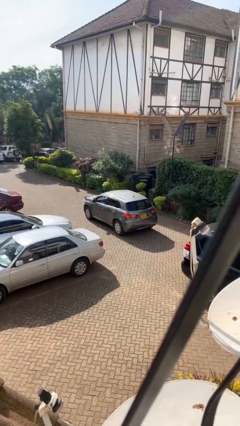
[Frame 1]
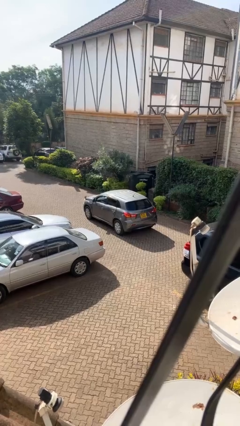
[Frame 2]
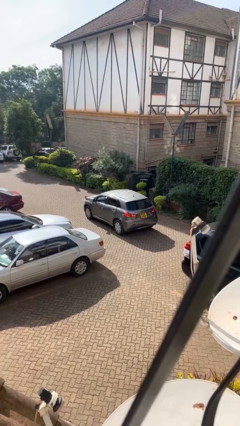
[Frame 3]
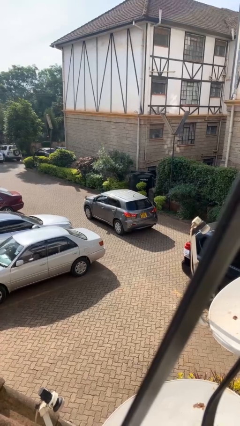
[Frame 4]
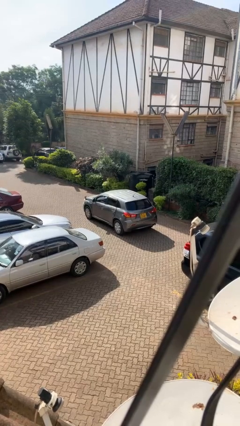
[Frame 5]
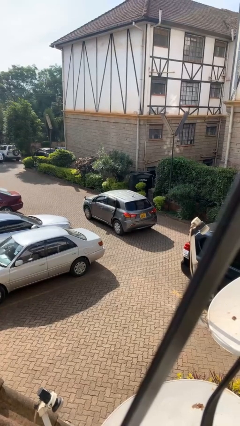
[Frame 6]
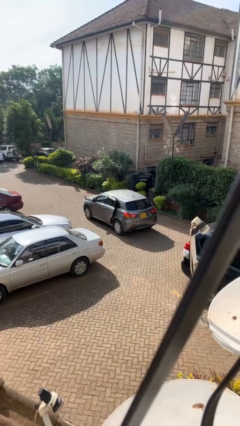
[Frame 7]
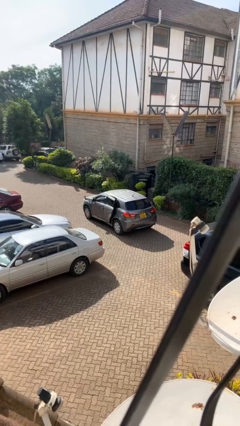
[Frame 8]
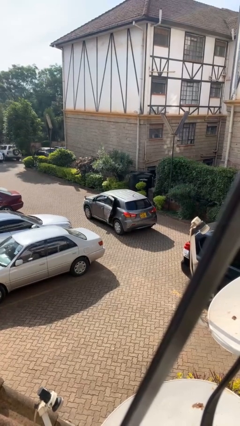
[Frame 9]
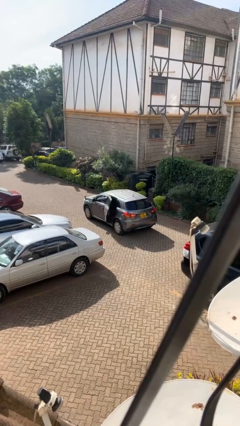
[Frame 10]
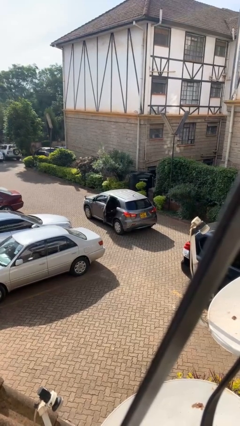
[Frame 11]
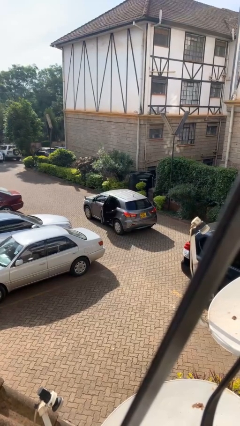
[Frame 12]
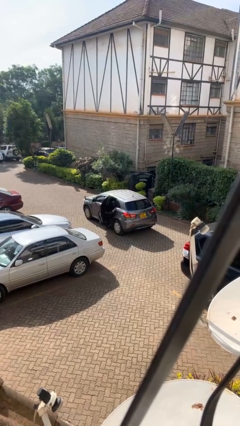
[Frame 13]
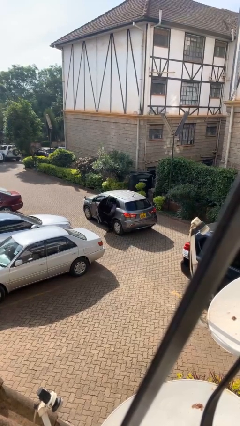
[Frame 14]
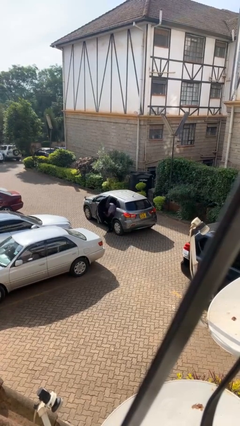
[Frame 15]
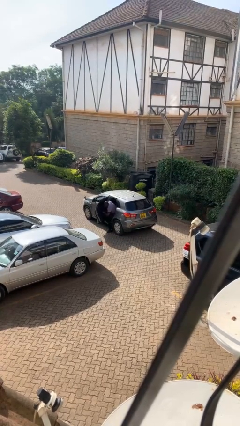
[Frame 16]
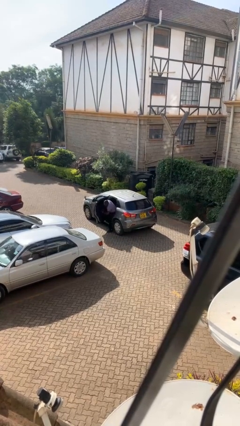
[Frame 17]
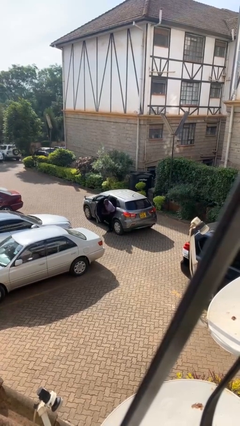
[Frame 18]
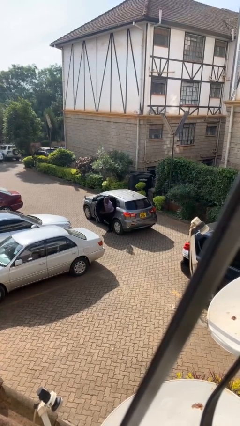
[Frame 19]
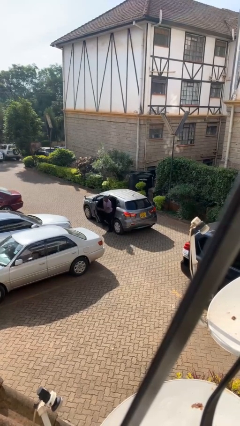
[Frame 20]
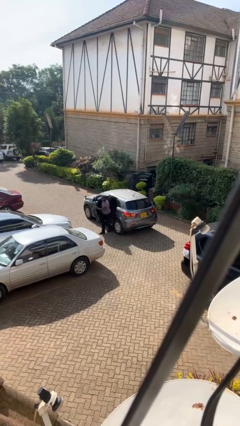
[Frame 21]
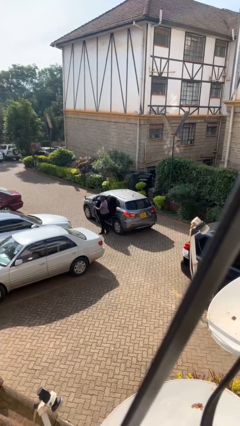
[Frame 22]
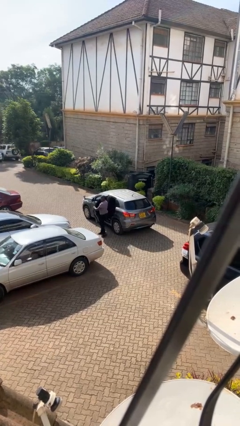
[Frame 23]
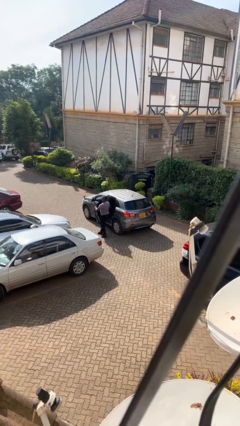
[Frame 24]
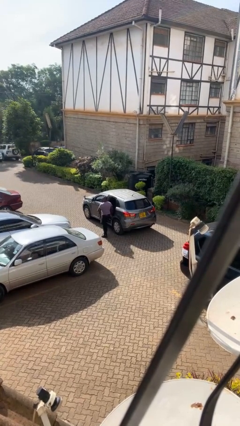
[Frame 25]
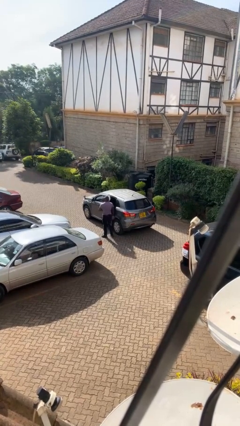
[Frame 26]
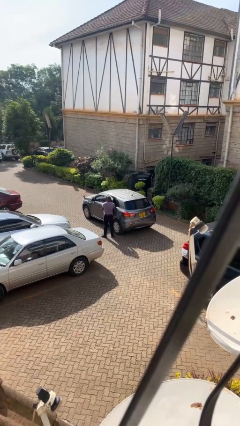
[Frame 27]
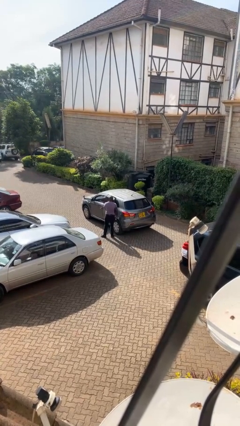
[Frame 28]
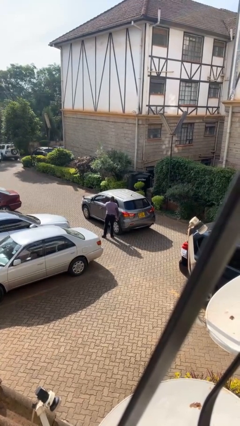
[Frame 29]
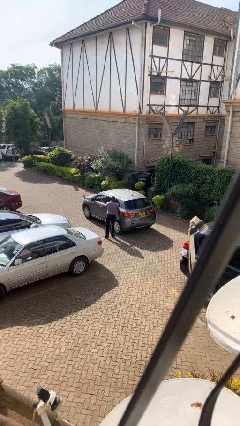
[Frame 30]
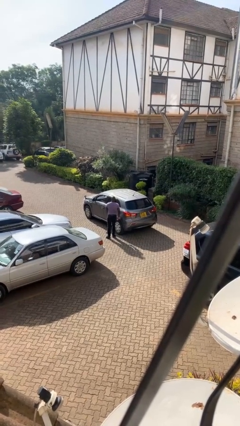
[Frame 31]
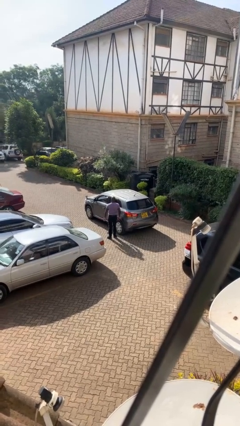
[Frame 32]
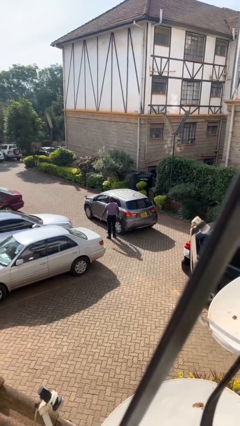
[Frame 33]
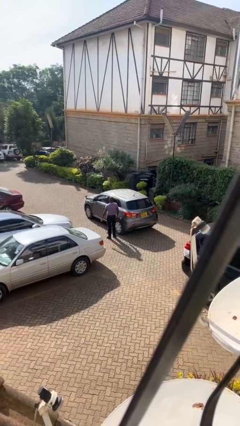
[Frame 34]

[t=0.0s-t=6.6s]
car drops off person

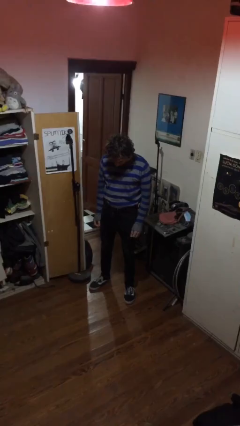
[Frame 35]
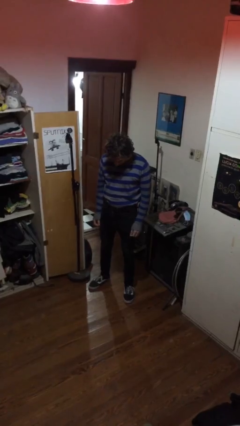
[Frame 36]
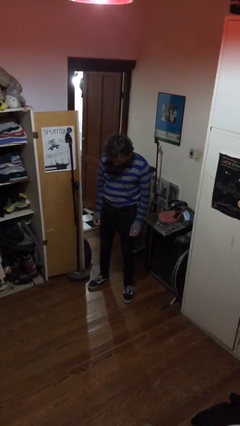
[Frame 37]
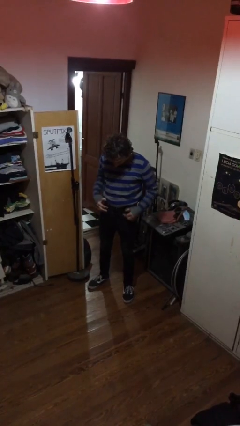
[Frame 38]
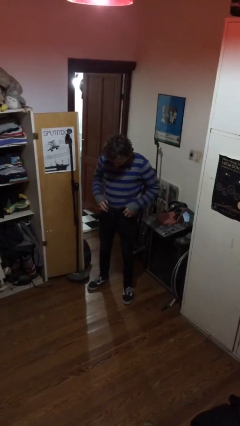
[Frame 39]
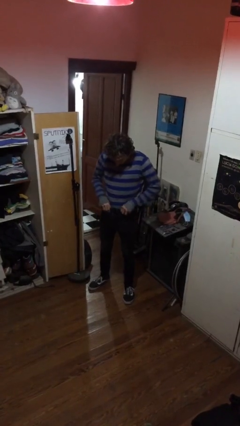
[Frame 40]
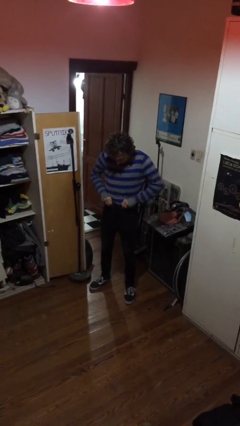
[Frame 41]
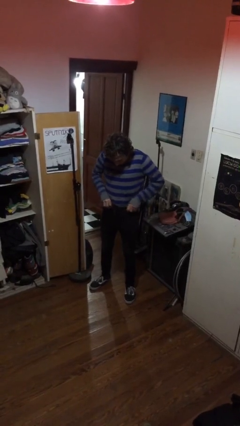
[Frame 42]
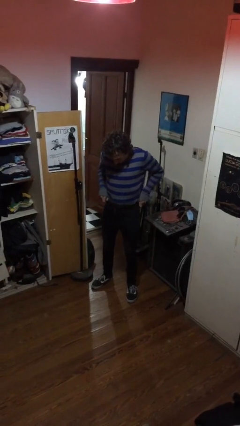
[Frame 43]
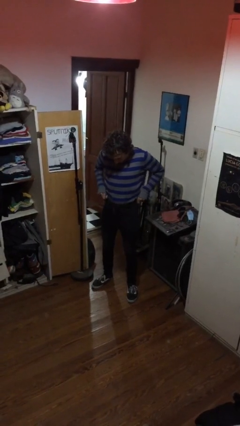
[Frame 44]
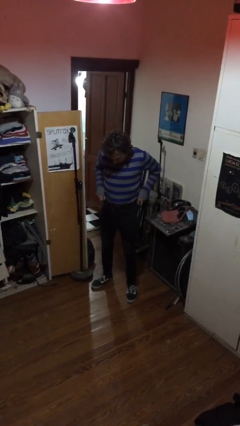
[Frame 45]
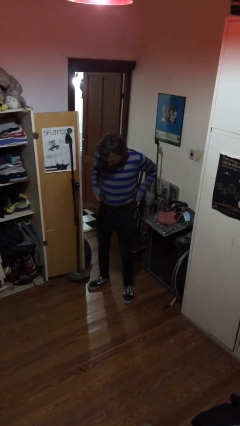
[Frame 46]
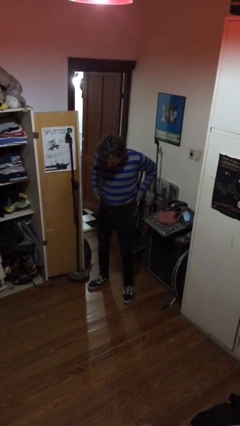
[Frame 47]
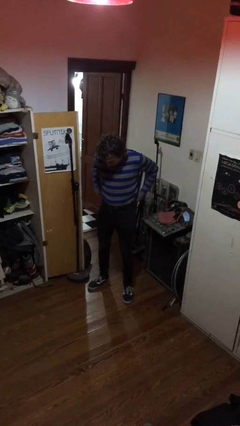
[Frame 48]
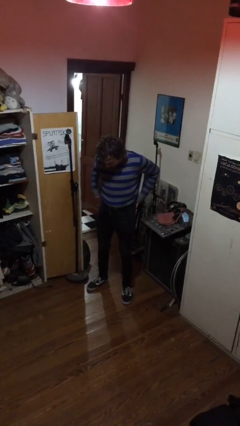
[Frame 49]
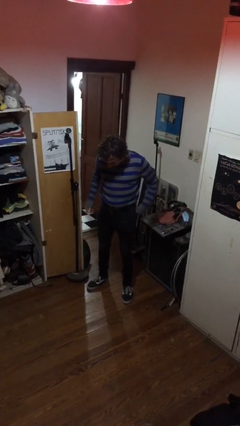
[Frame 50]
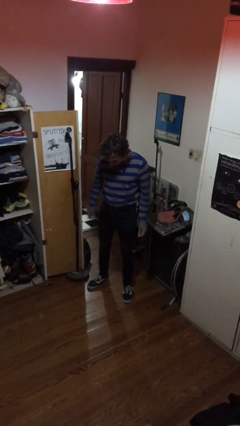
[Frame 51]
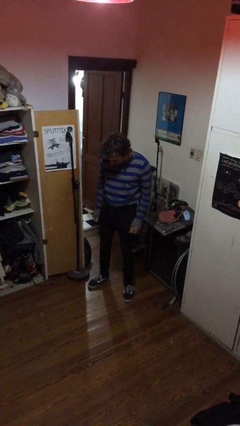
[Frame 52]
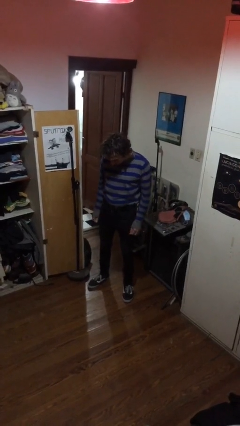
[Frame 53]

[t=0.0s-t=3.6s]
person hikes up pants

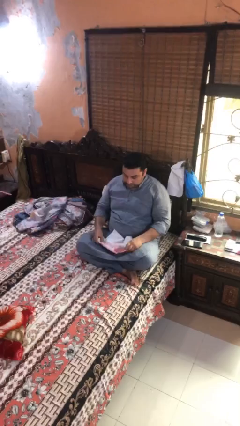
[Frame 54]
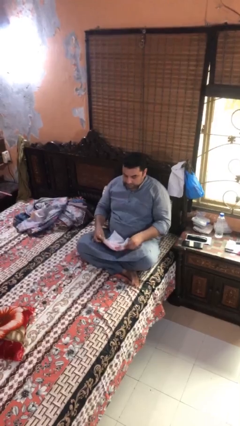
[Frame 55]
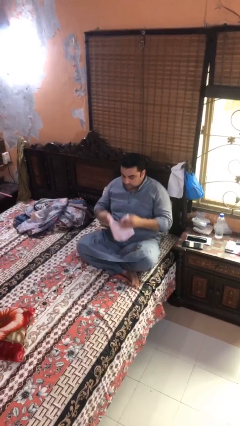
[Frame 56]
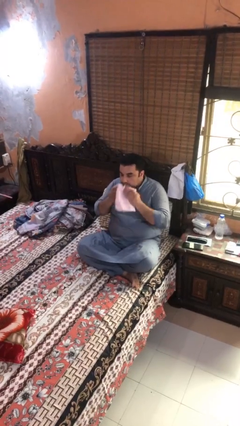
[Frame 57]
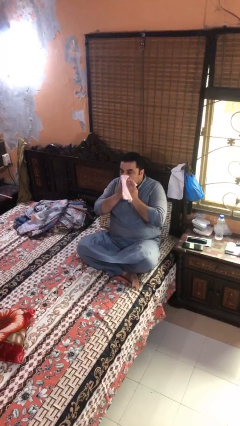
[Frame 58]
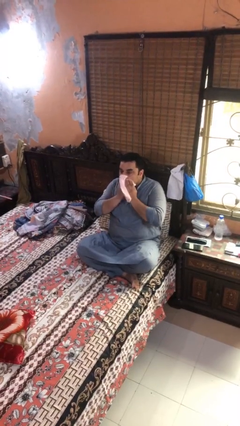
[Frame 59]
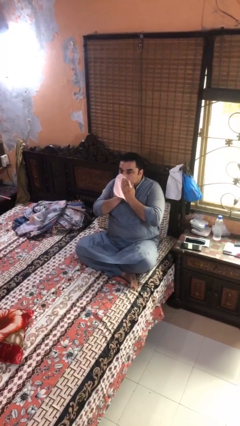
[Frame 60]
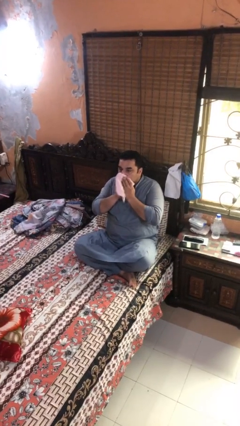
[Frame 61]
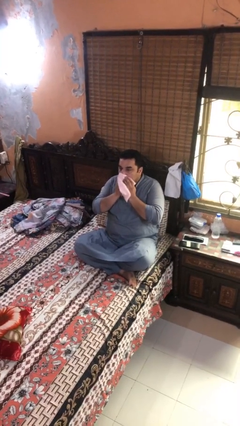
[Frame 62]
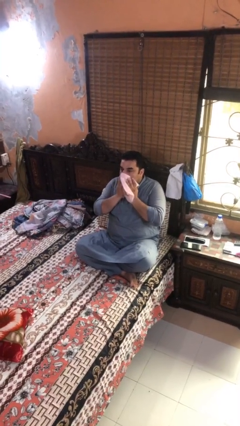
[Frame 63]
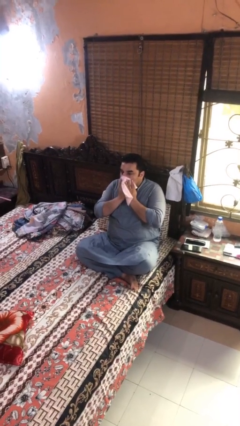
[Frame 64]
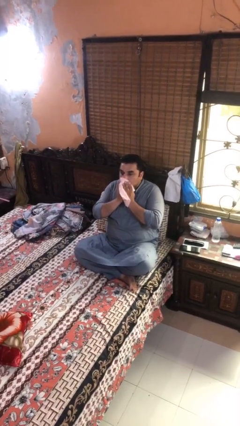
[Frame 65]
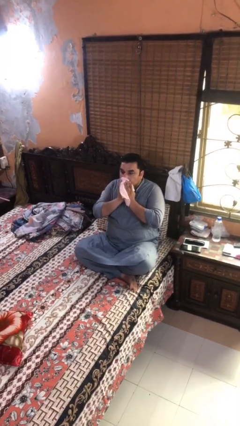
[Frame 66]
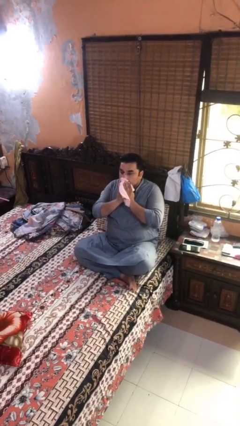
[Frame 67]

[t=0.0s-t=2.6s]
person wipes mouth with napkin

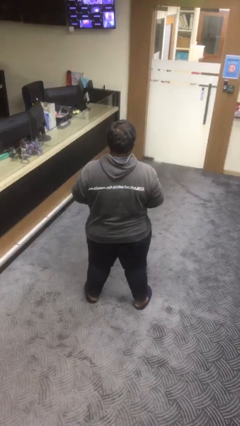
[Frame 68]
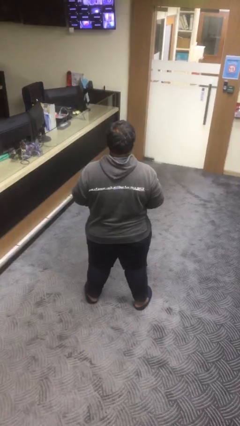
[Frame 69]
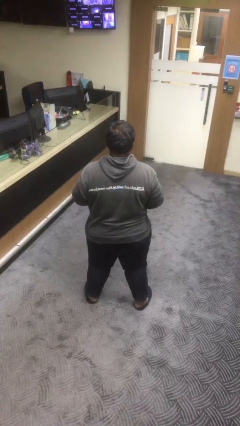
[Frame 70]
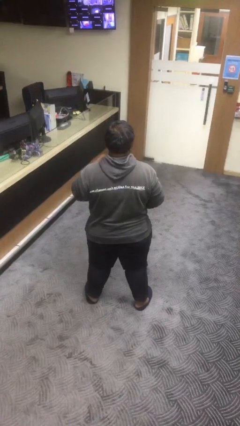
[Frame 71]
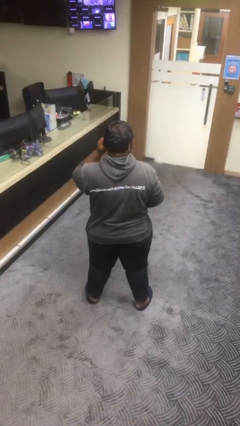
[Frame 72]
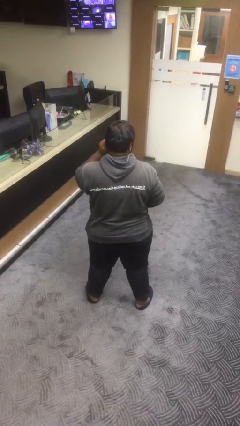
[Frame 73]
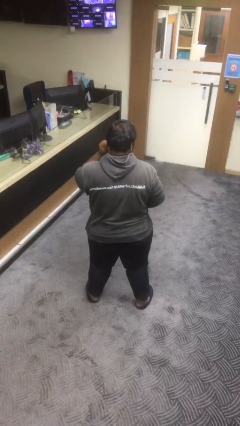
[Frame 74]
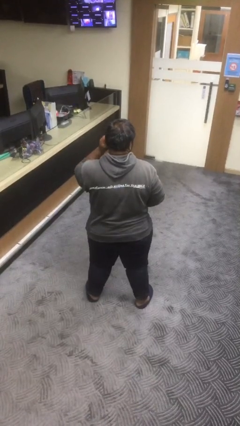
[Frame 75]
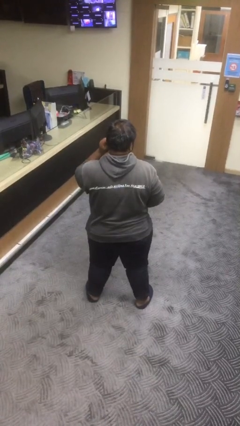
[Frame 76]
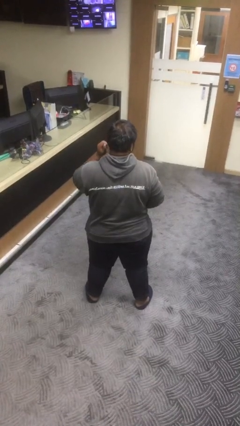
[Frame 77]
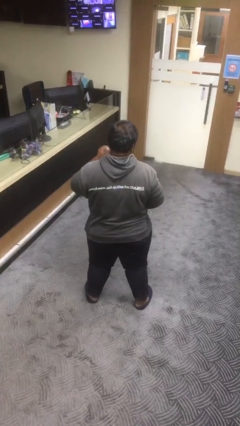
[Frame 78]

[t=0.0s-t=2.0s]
person touches earlobe

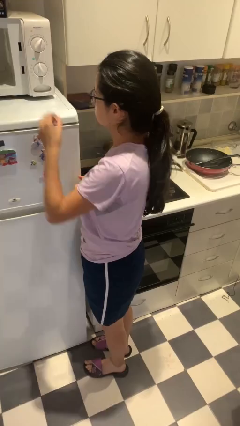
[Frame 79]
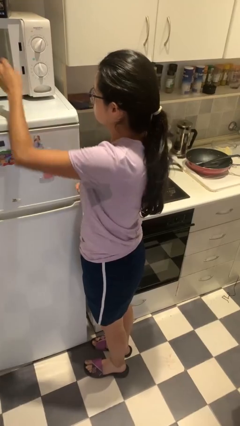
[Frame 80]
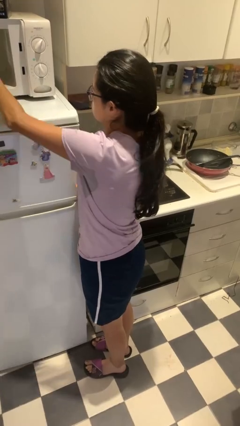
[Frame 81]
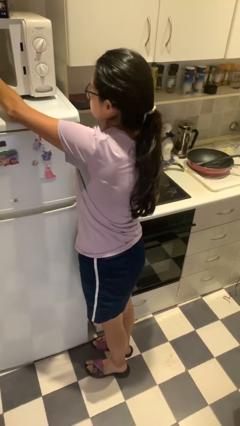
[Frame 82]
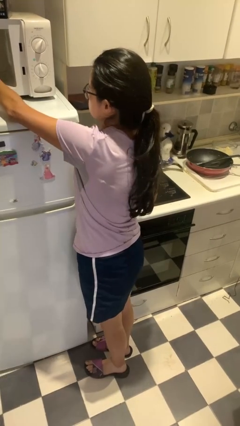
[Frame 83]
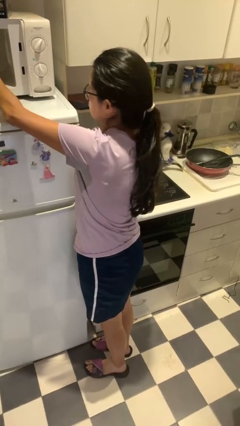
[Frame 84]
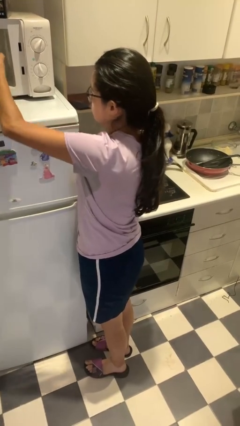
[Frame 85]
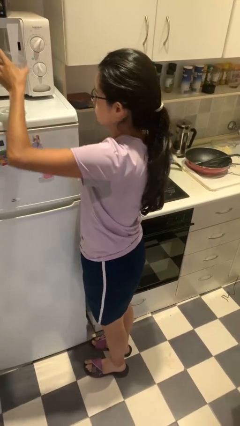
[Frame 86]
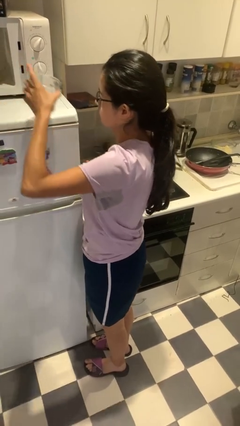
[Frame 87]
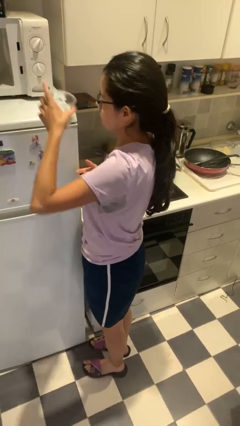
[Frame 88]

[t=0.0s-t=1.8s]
person takes object from microwave

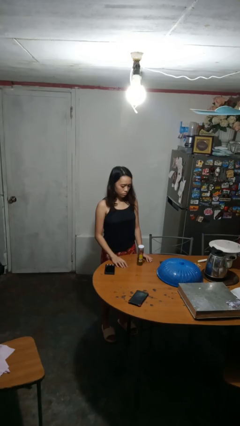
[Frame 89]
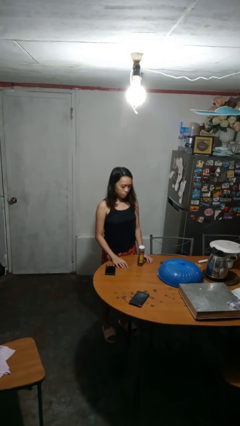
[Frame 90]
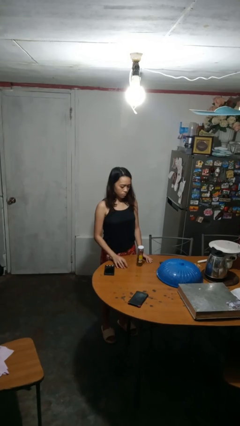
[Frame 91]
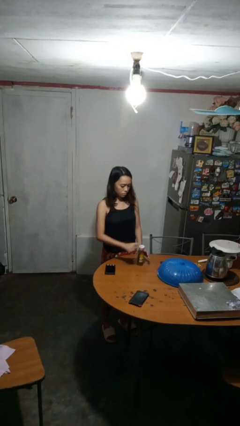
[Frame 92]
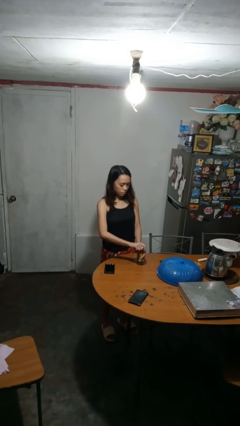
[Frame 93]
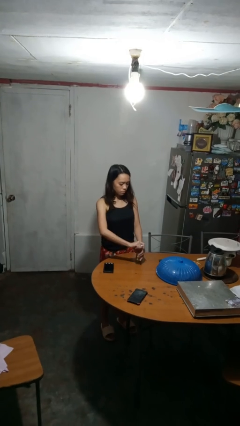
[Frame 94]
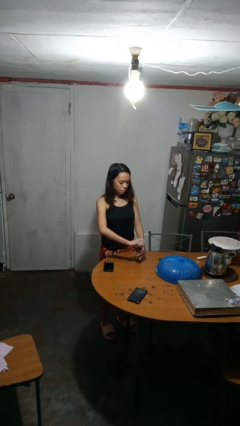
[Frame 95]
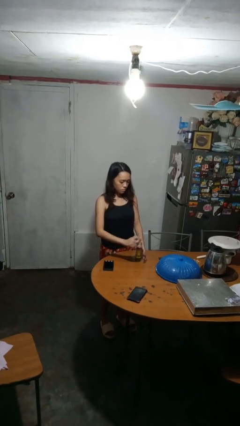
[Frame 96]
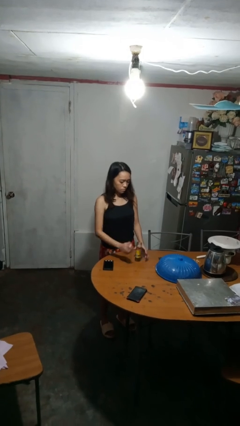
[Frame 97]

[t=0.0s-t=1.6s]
person opens jar
